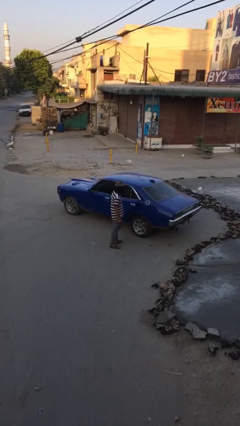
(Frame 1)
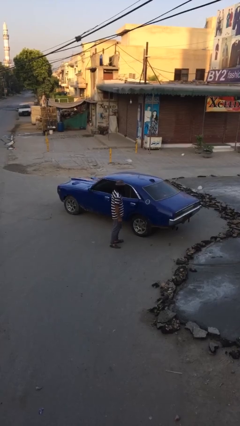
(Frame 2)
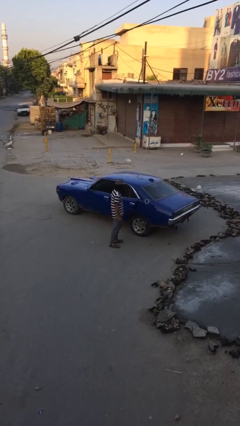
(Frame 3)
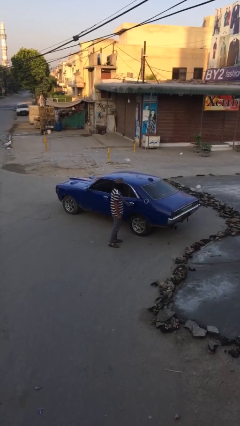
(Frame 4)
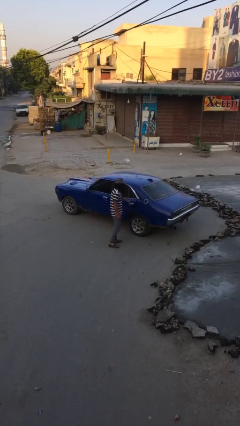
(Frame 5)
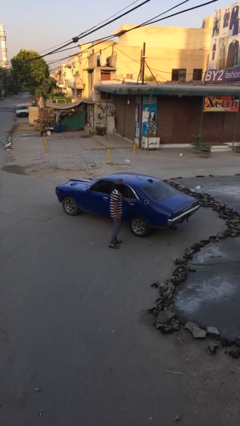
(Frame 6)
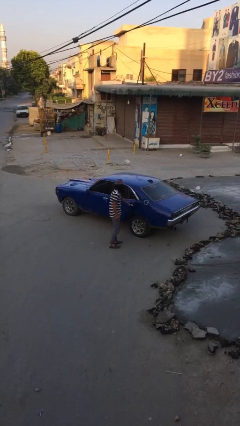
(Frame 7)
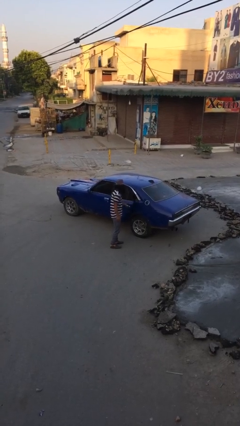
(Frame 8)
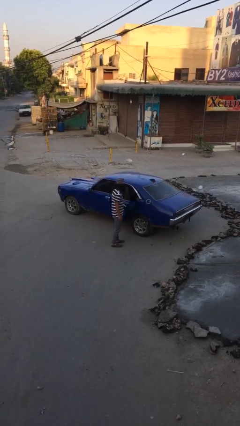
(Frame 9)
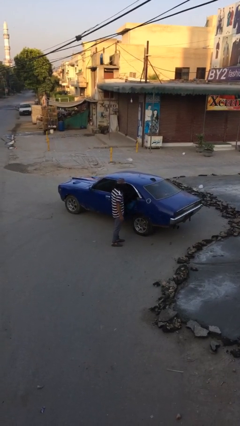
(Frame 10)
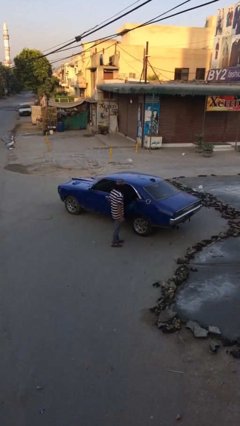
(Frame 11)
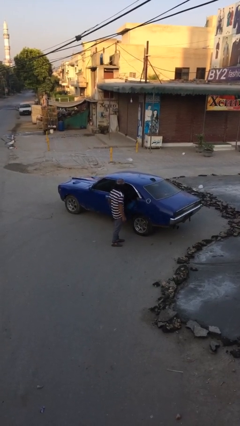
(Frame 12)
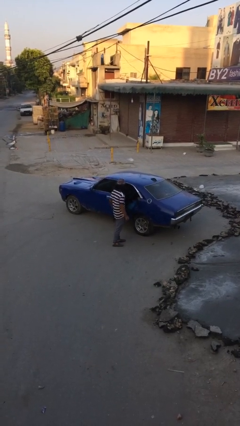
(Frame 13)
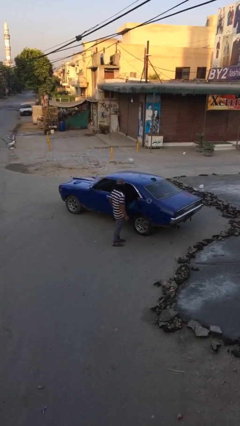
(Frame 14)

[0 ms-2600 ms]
person opens car door

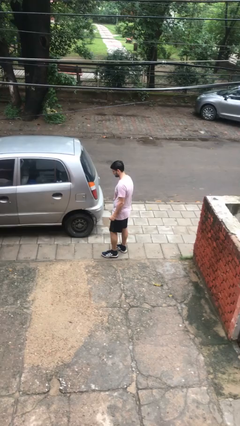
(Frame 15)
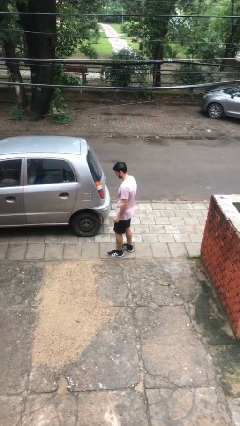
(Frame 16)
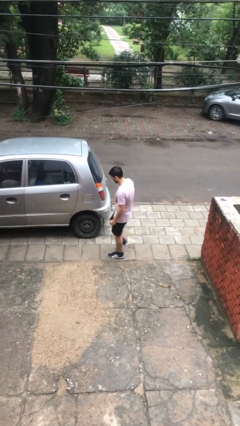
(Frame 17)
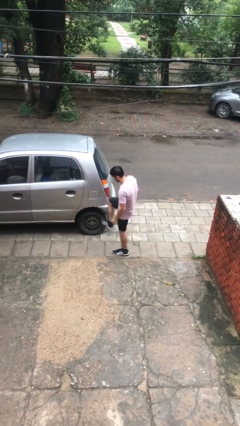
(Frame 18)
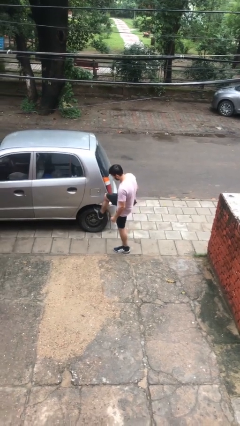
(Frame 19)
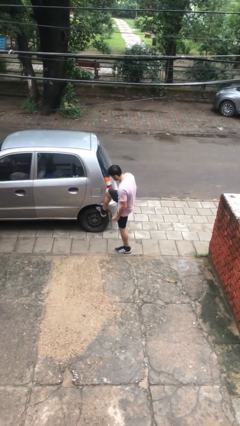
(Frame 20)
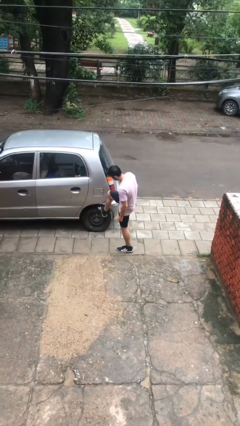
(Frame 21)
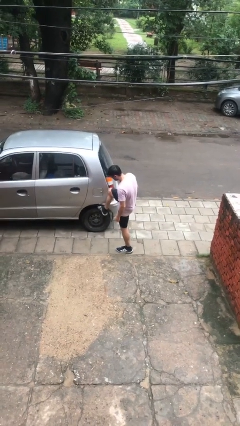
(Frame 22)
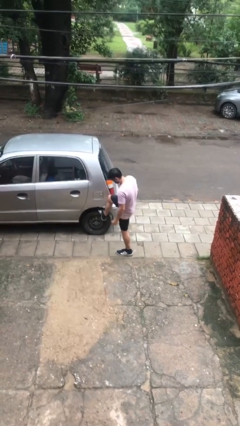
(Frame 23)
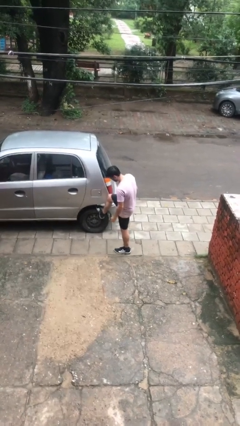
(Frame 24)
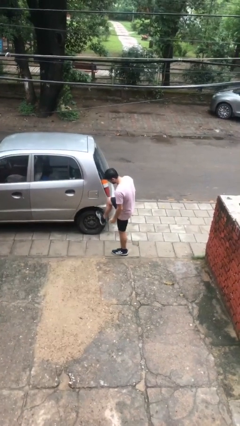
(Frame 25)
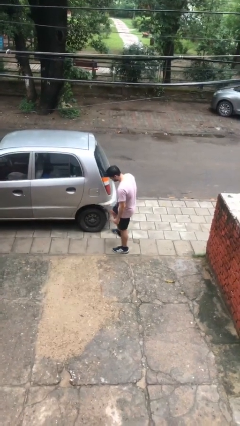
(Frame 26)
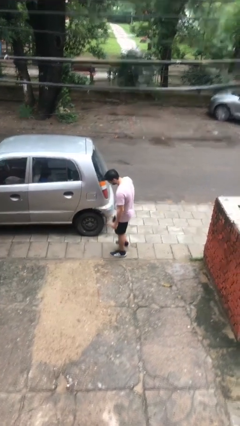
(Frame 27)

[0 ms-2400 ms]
person kicks car tires

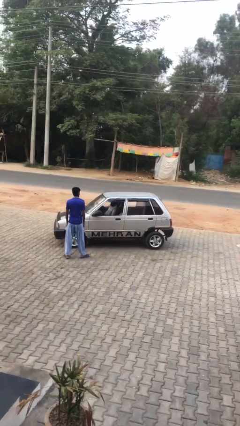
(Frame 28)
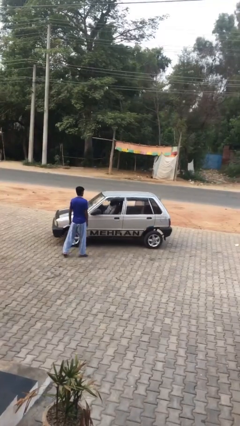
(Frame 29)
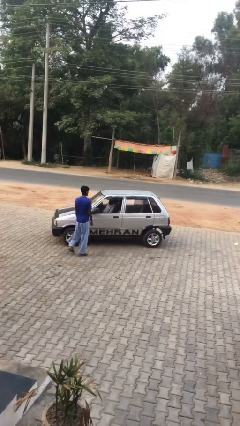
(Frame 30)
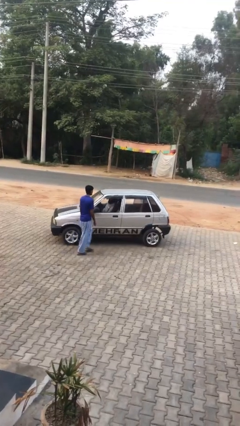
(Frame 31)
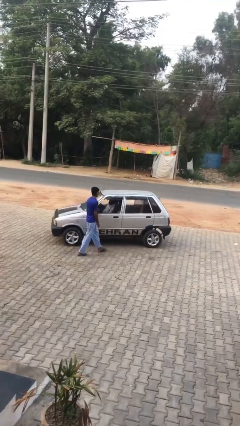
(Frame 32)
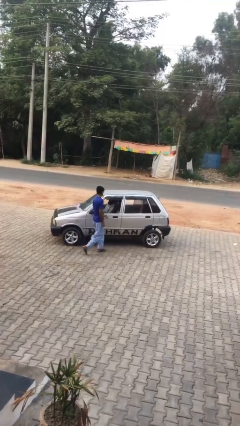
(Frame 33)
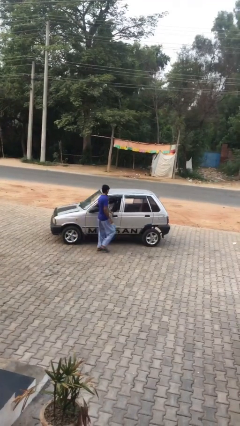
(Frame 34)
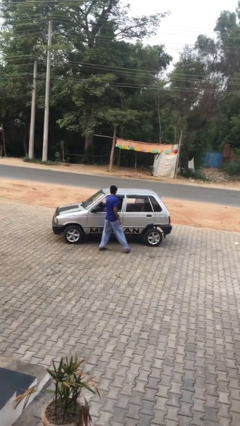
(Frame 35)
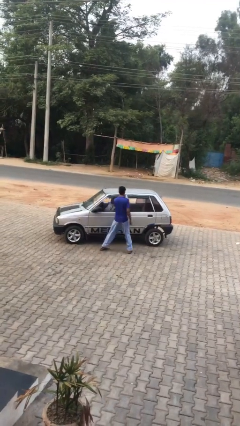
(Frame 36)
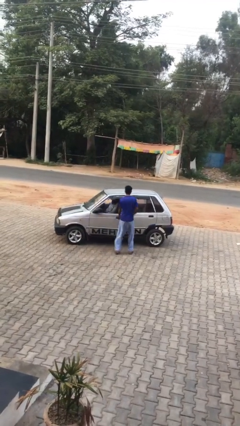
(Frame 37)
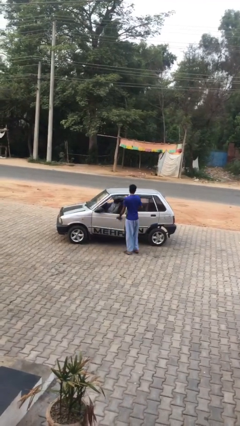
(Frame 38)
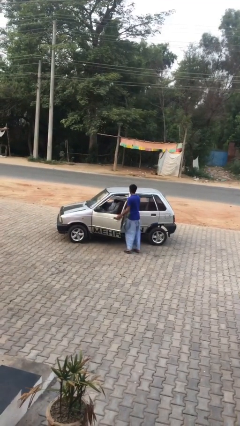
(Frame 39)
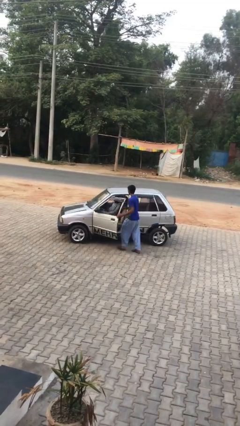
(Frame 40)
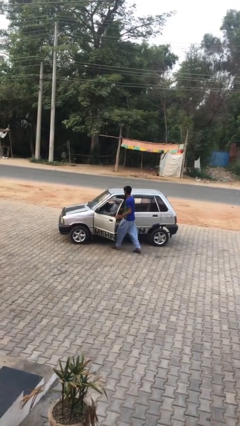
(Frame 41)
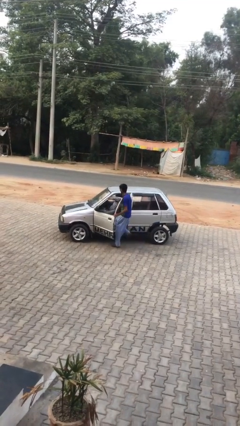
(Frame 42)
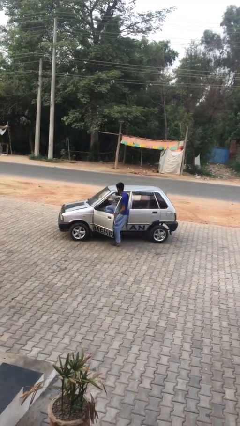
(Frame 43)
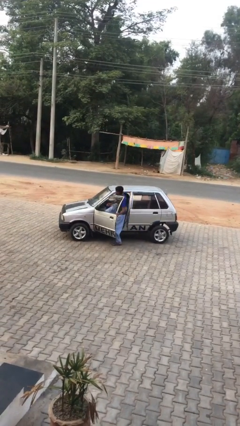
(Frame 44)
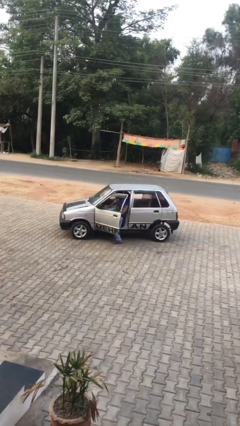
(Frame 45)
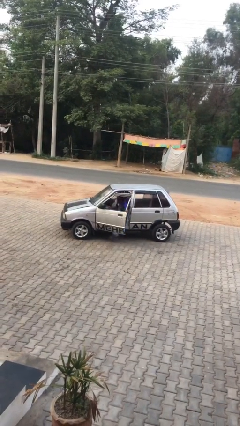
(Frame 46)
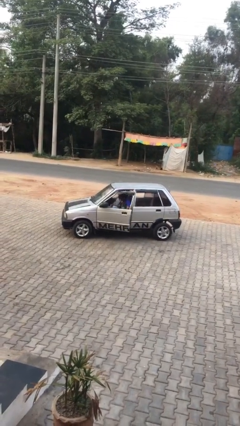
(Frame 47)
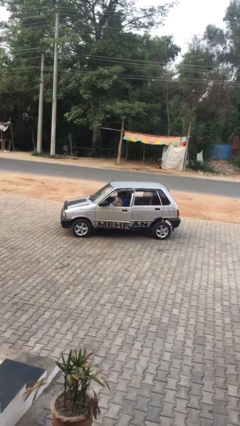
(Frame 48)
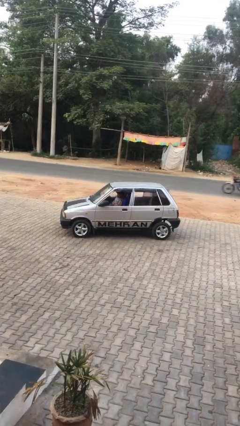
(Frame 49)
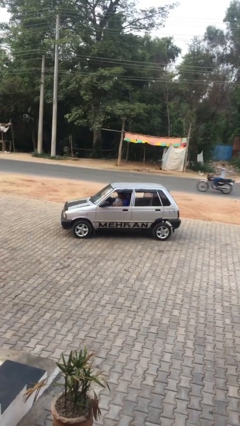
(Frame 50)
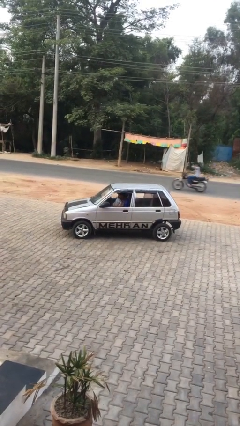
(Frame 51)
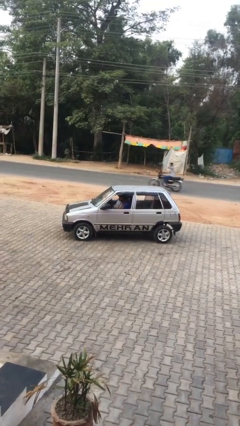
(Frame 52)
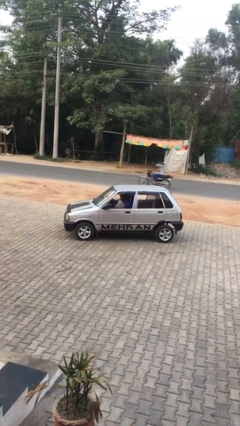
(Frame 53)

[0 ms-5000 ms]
car picks up person

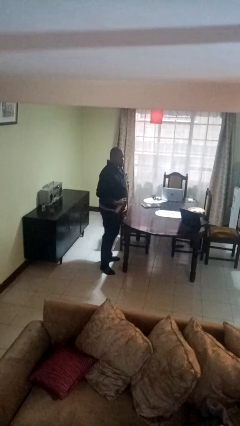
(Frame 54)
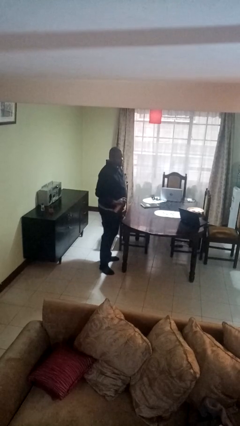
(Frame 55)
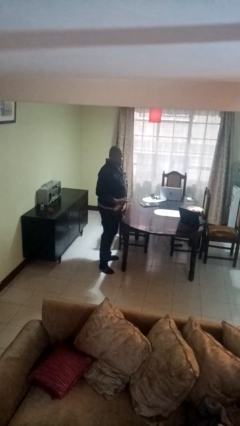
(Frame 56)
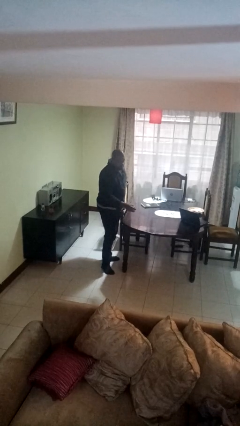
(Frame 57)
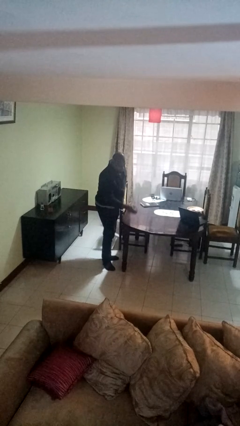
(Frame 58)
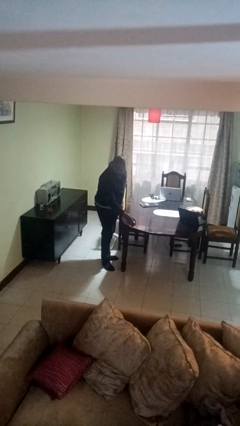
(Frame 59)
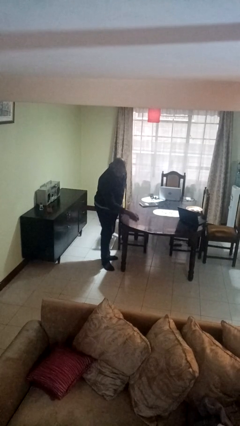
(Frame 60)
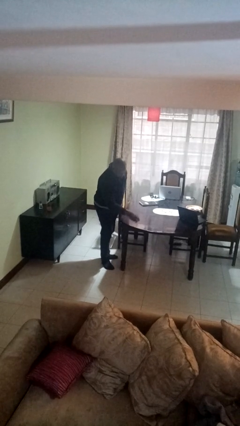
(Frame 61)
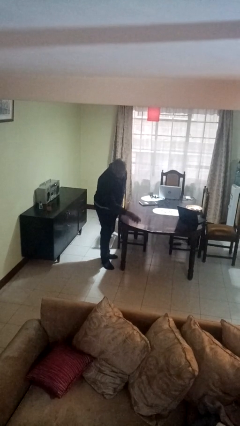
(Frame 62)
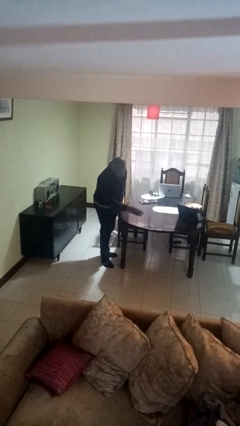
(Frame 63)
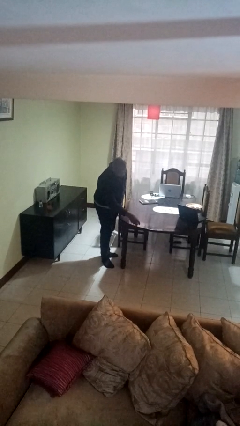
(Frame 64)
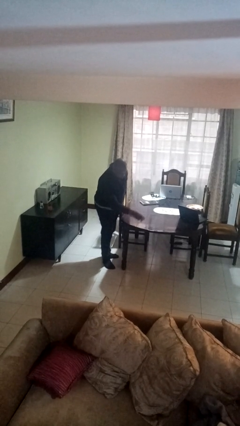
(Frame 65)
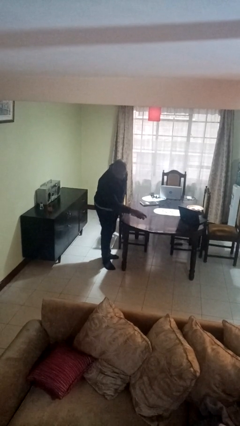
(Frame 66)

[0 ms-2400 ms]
person sprays from bottle

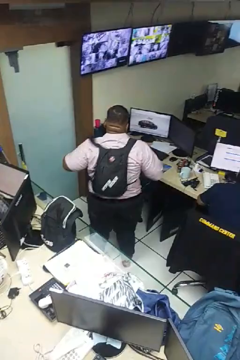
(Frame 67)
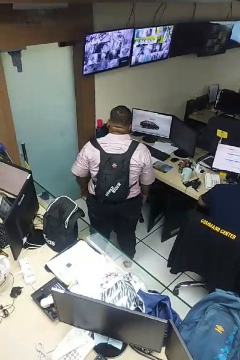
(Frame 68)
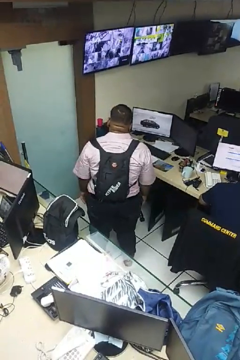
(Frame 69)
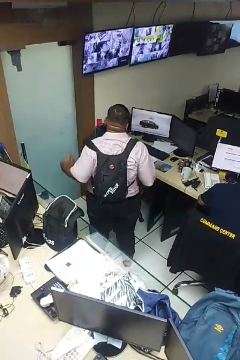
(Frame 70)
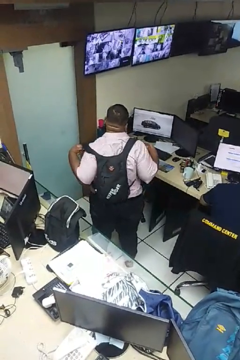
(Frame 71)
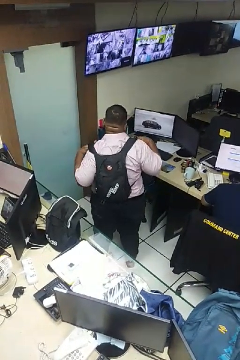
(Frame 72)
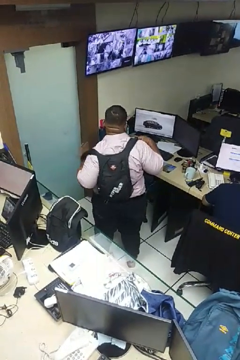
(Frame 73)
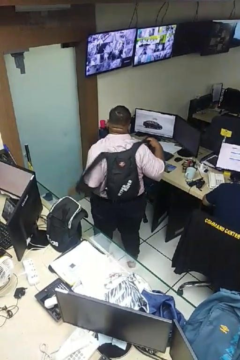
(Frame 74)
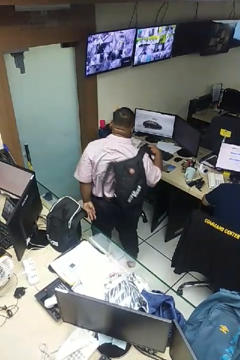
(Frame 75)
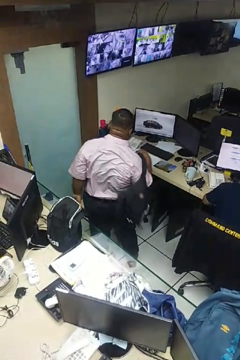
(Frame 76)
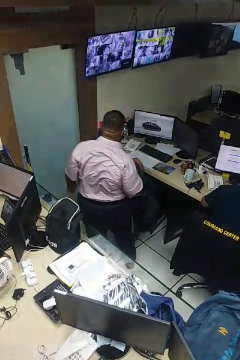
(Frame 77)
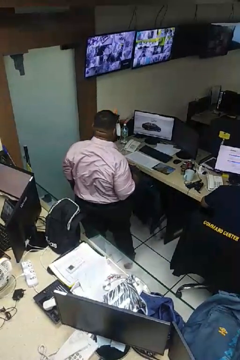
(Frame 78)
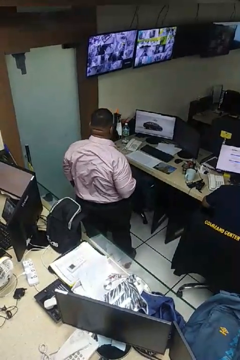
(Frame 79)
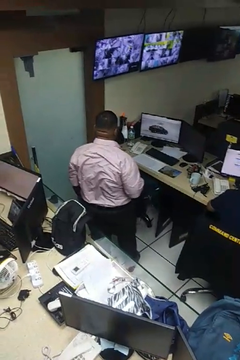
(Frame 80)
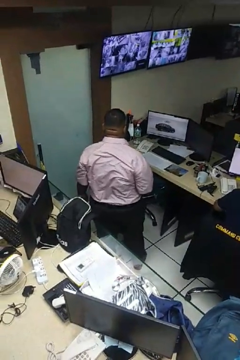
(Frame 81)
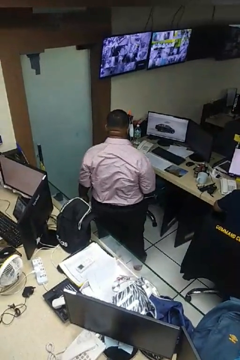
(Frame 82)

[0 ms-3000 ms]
person takes off backpack

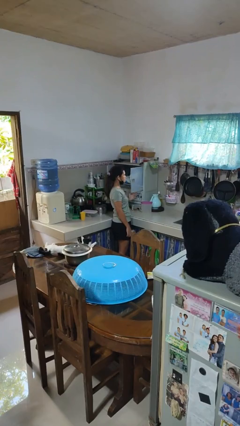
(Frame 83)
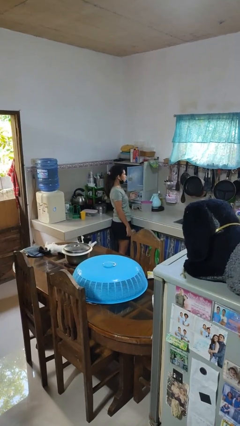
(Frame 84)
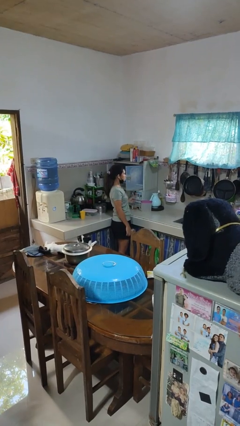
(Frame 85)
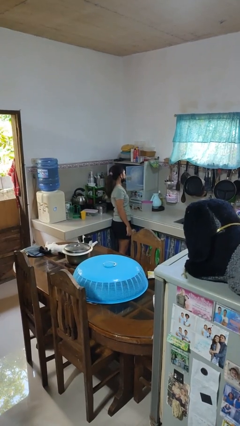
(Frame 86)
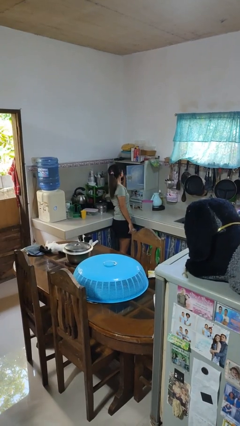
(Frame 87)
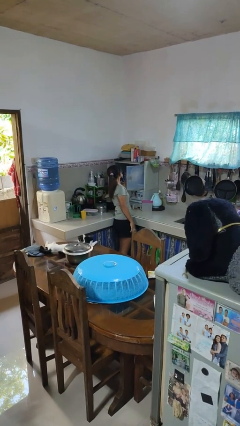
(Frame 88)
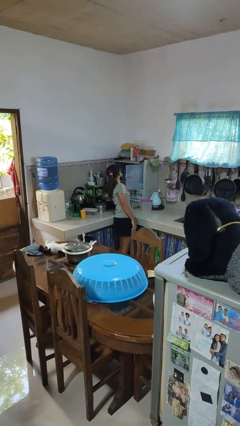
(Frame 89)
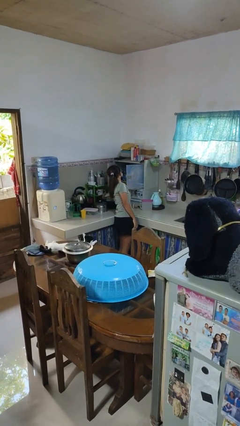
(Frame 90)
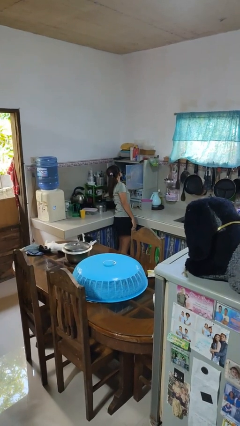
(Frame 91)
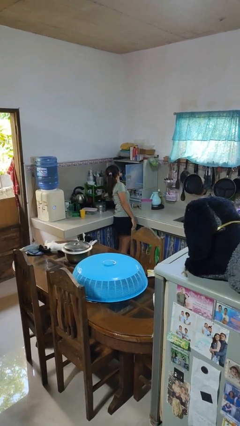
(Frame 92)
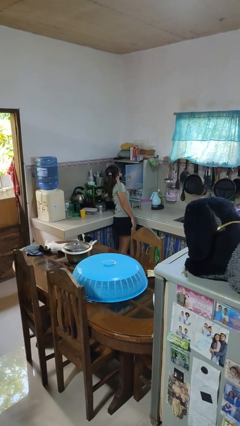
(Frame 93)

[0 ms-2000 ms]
person searches in kitchen drawer

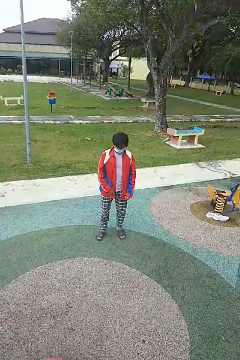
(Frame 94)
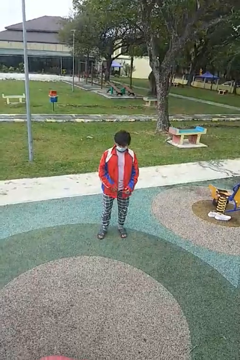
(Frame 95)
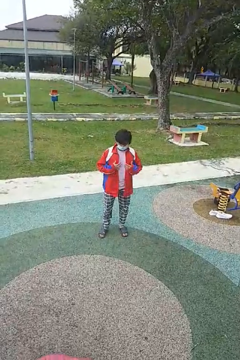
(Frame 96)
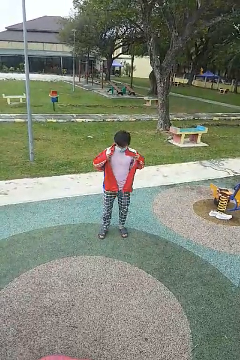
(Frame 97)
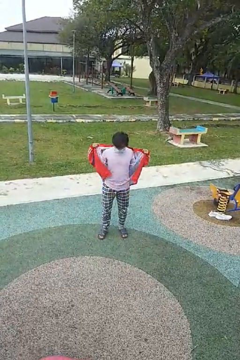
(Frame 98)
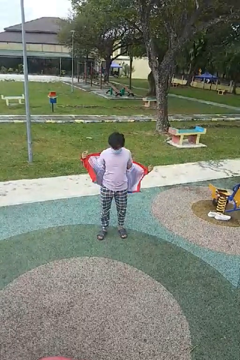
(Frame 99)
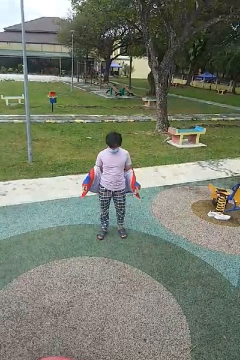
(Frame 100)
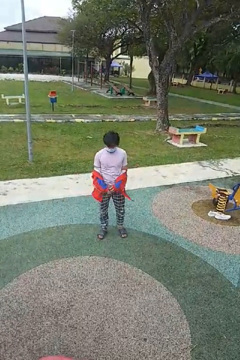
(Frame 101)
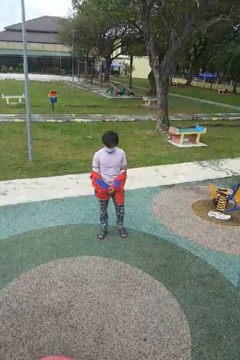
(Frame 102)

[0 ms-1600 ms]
person takes off jacket
